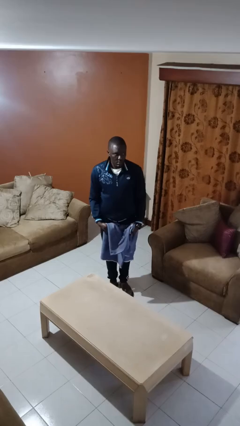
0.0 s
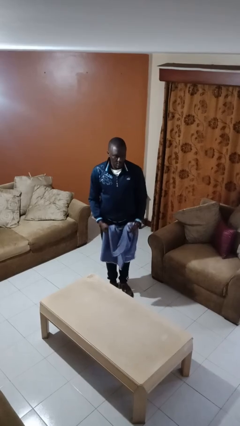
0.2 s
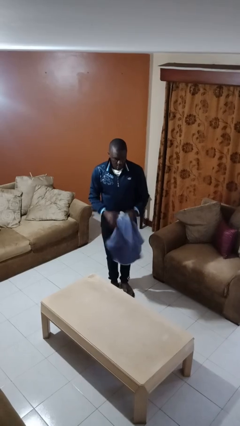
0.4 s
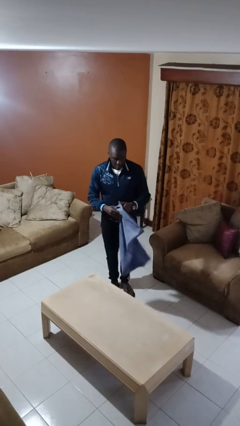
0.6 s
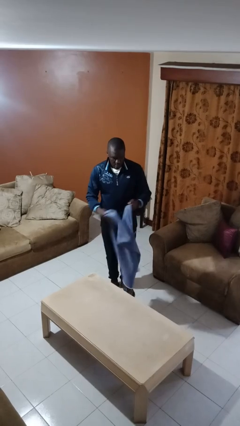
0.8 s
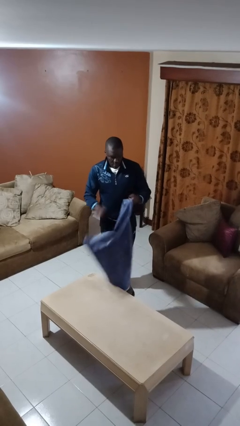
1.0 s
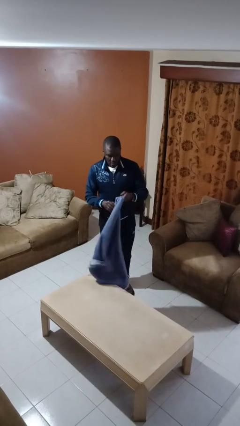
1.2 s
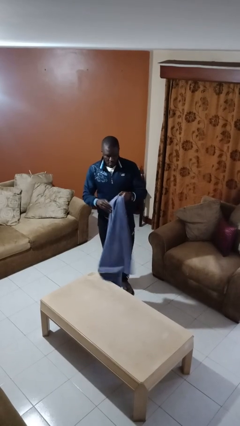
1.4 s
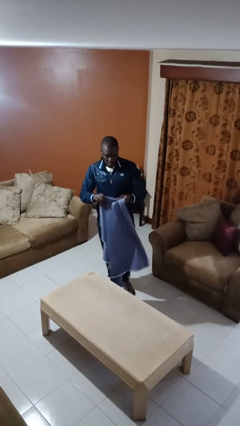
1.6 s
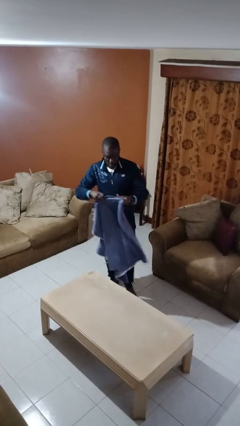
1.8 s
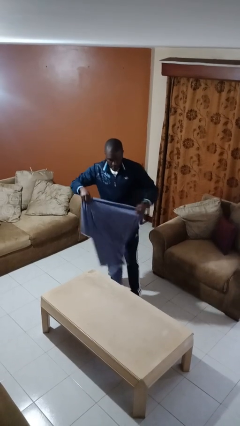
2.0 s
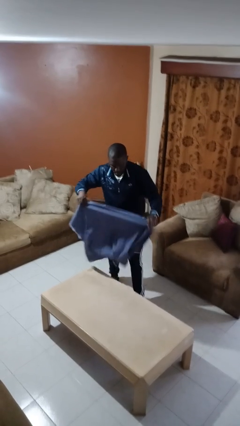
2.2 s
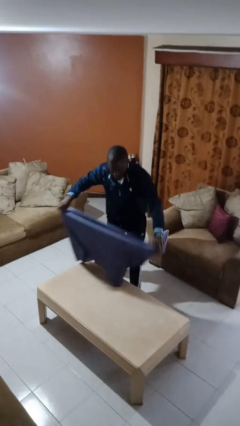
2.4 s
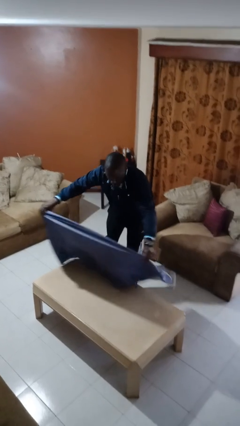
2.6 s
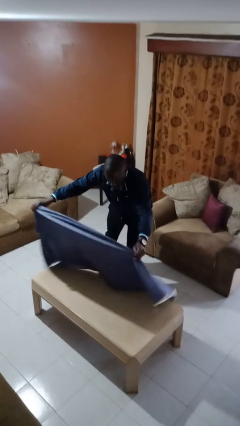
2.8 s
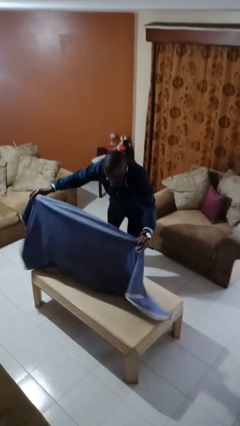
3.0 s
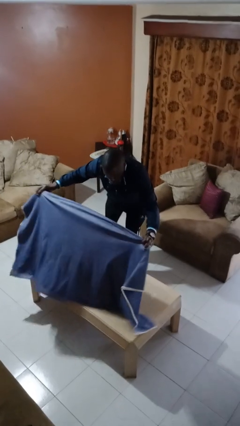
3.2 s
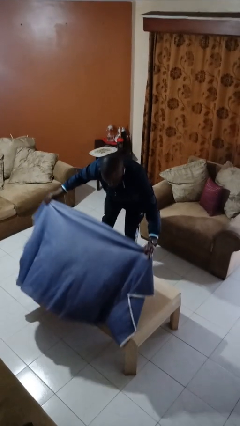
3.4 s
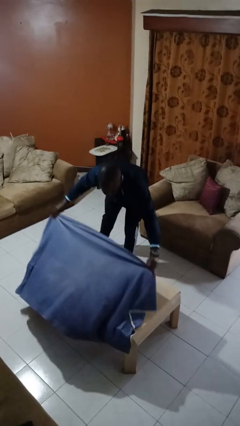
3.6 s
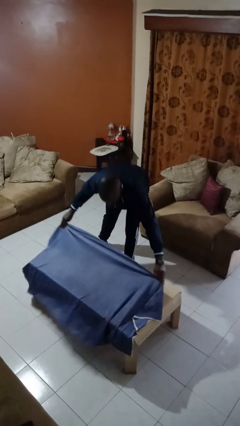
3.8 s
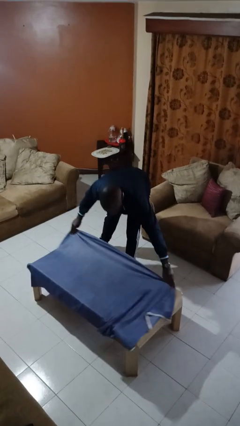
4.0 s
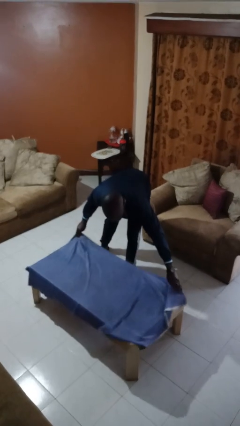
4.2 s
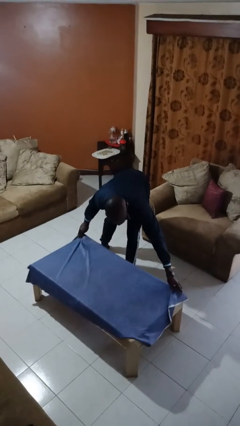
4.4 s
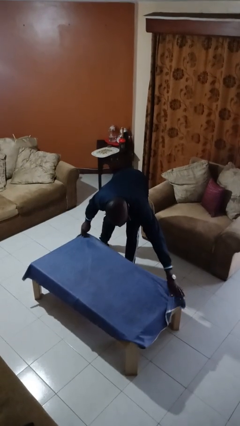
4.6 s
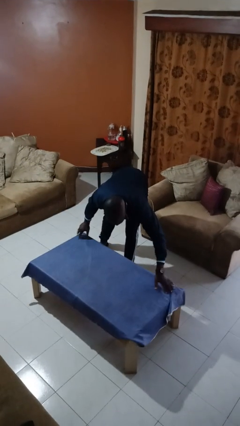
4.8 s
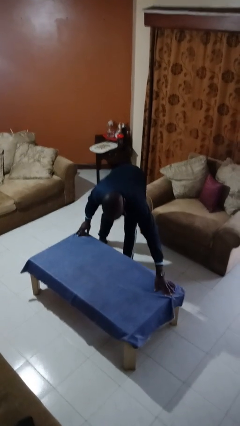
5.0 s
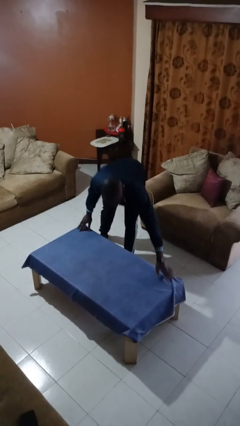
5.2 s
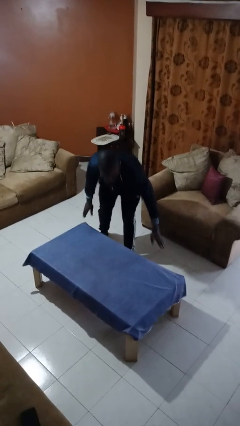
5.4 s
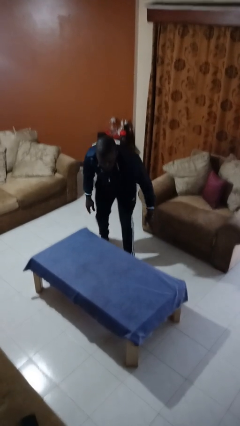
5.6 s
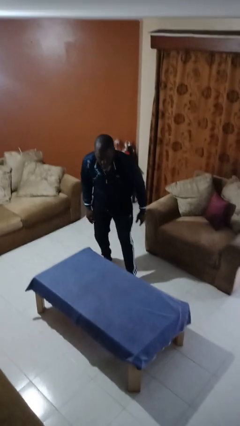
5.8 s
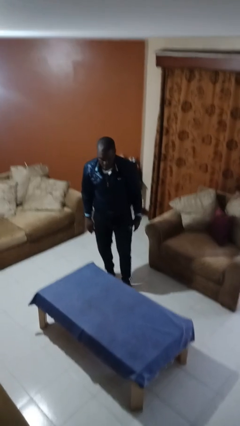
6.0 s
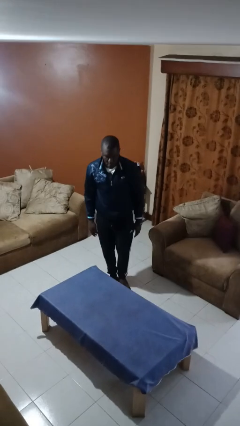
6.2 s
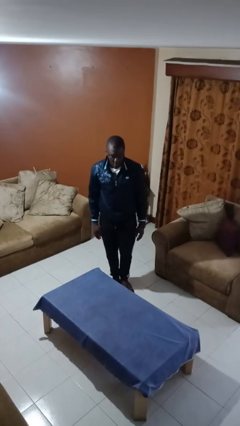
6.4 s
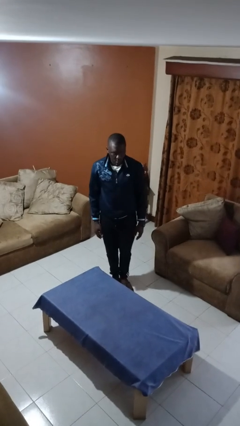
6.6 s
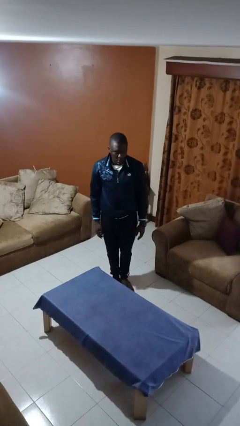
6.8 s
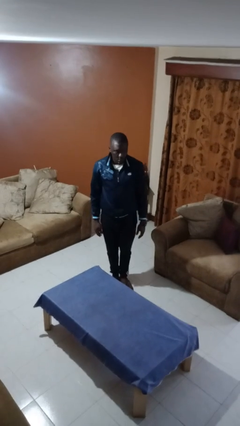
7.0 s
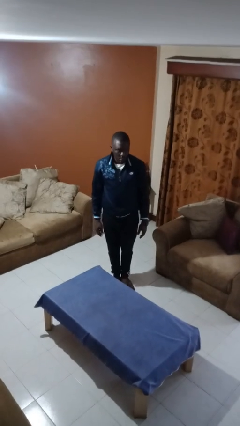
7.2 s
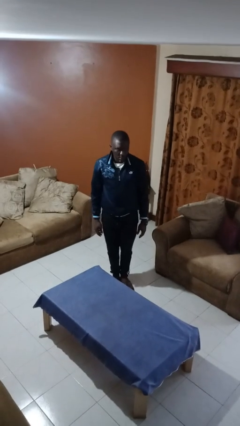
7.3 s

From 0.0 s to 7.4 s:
person spreads tablecloth

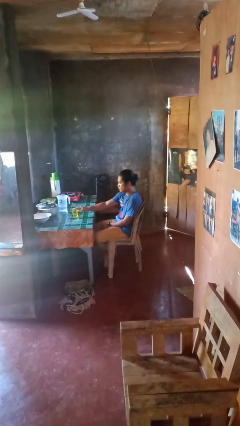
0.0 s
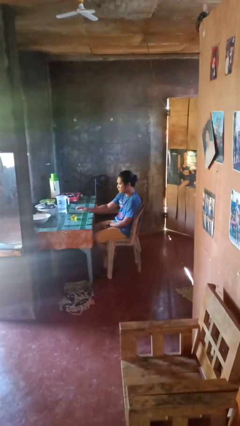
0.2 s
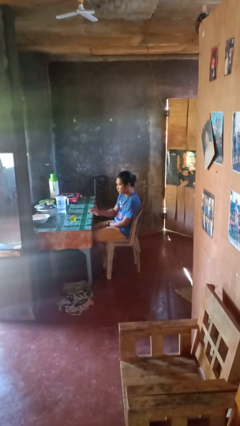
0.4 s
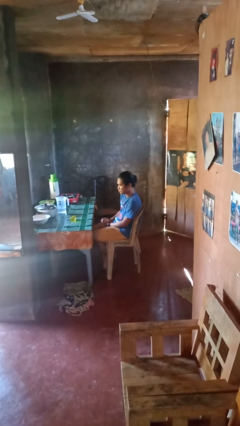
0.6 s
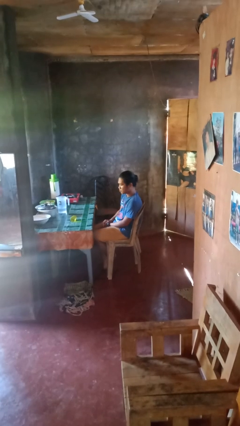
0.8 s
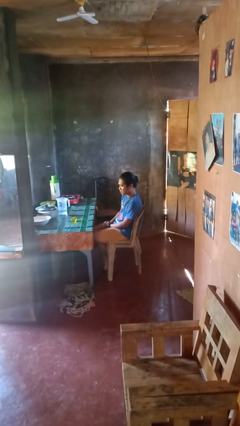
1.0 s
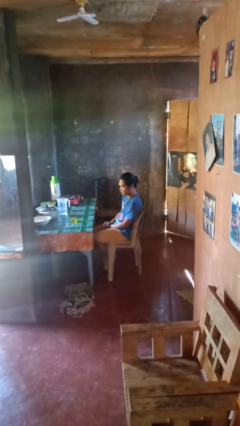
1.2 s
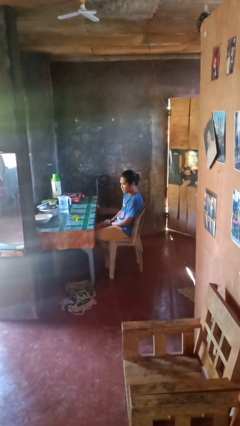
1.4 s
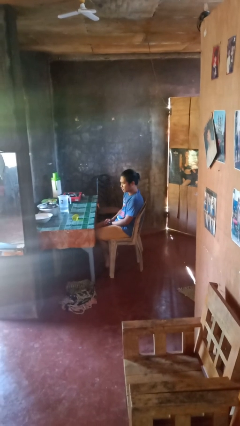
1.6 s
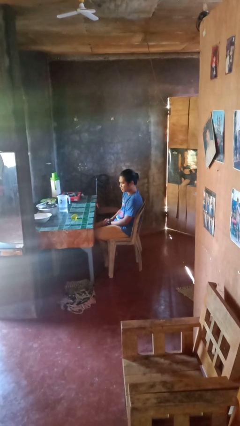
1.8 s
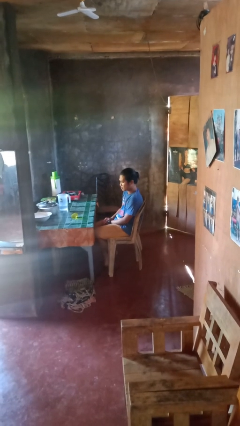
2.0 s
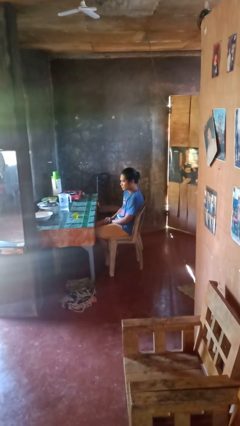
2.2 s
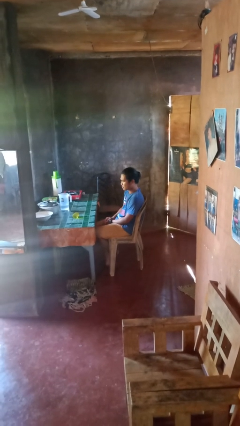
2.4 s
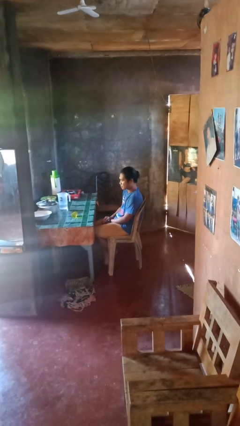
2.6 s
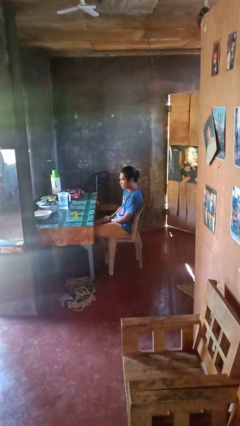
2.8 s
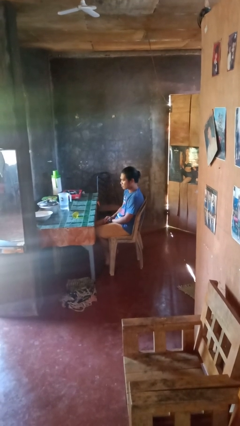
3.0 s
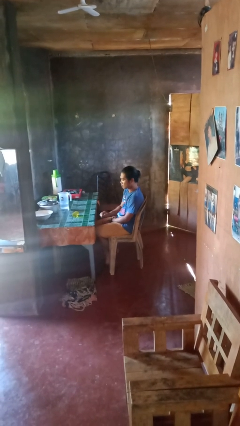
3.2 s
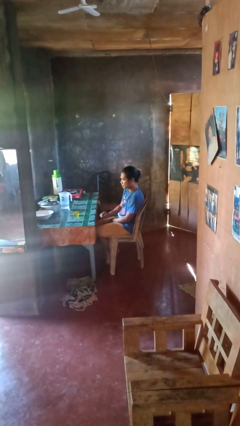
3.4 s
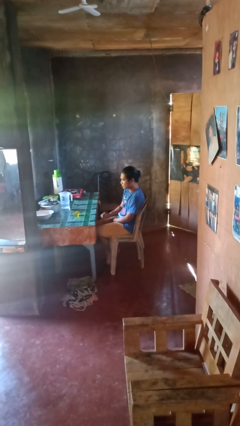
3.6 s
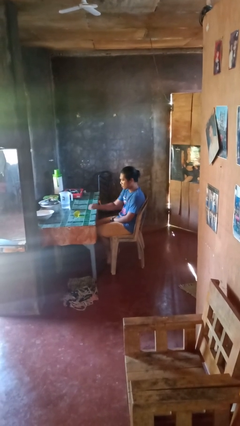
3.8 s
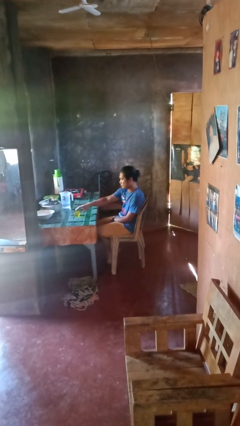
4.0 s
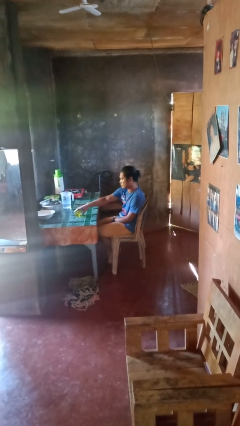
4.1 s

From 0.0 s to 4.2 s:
person spills on table

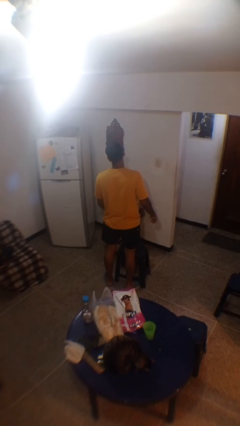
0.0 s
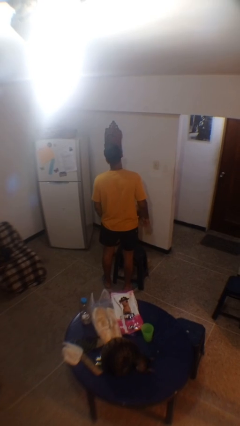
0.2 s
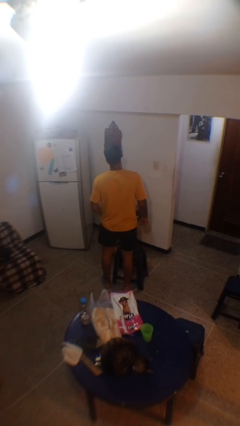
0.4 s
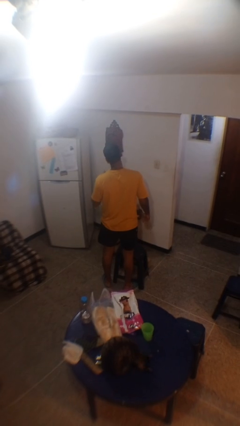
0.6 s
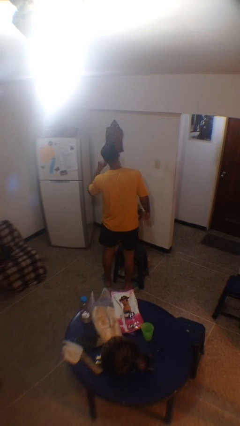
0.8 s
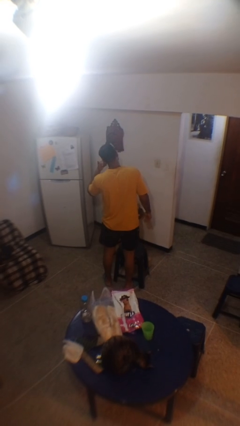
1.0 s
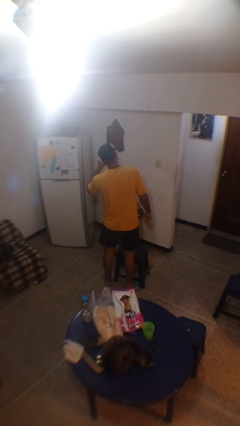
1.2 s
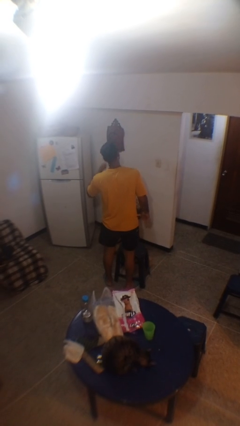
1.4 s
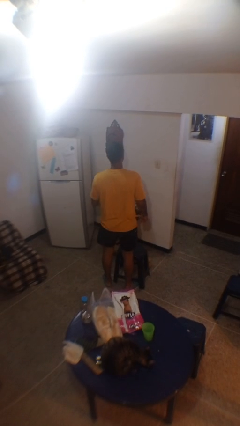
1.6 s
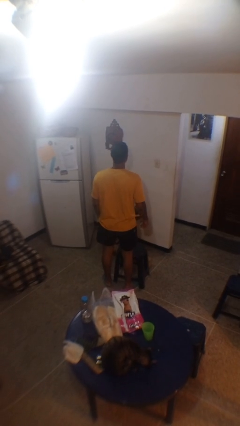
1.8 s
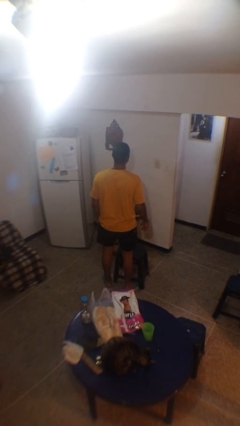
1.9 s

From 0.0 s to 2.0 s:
person gestures call me

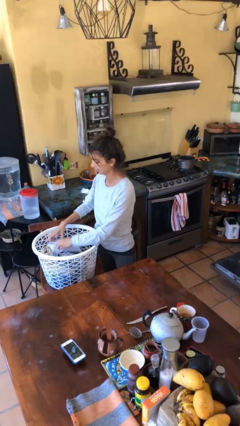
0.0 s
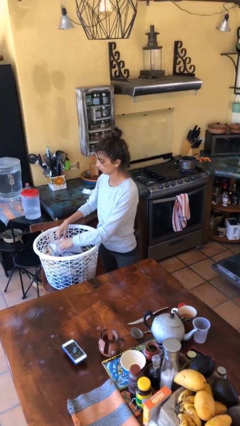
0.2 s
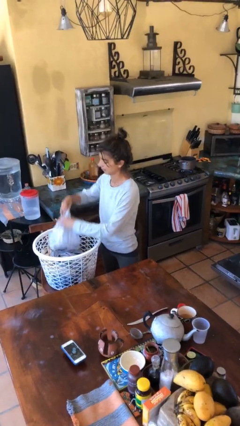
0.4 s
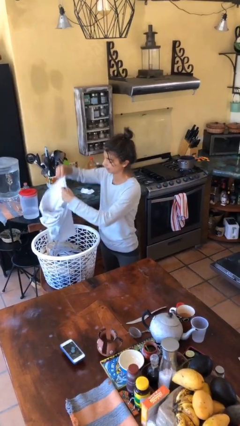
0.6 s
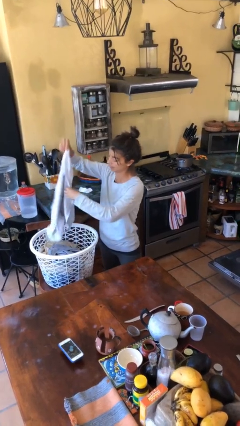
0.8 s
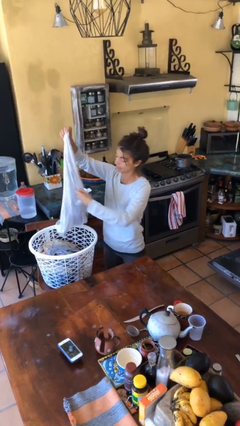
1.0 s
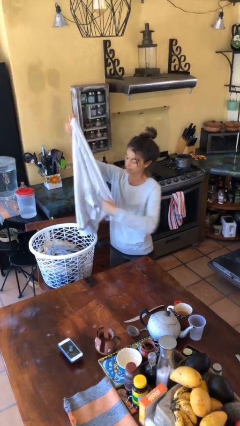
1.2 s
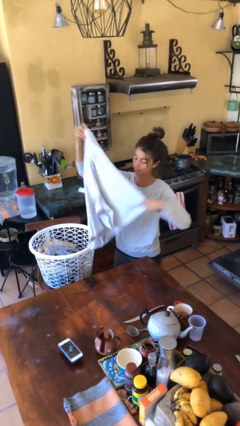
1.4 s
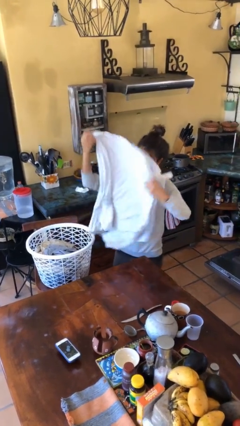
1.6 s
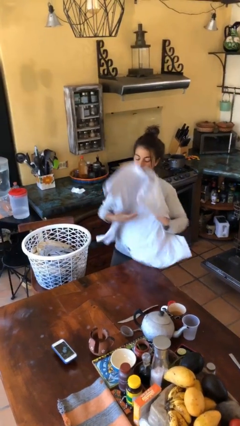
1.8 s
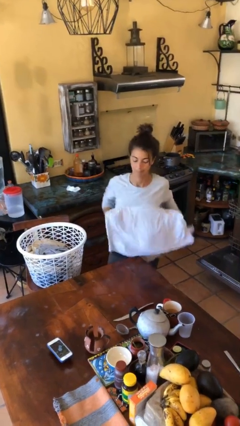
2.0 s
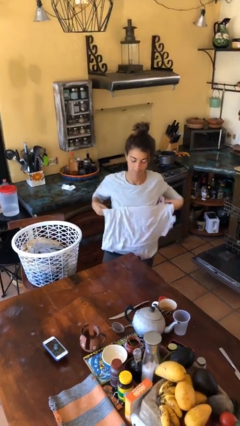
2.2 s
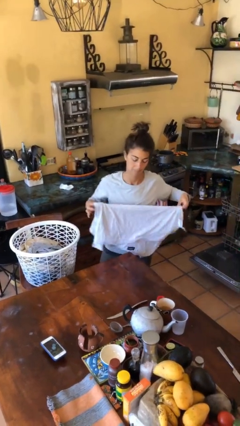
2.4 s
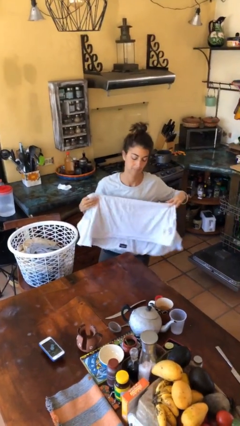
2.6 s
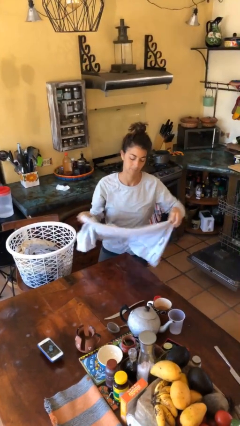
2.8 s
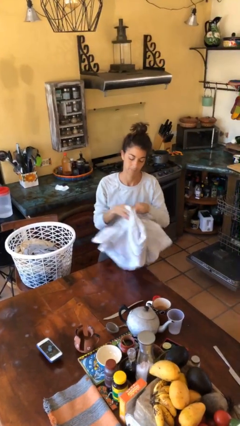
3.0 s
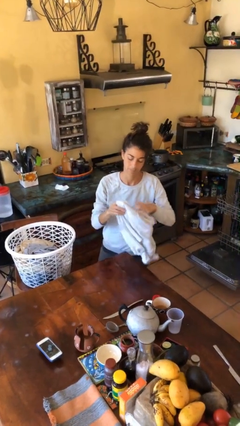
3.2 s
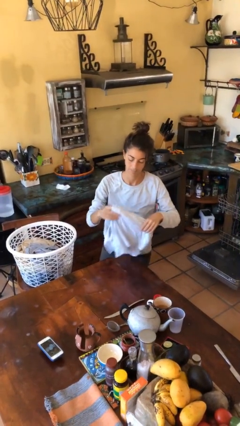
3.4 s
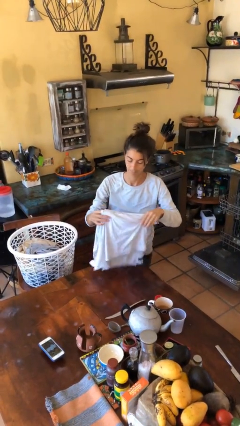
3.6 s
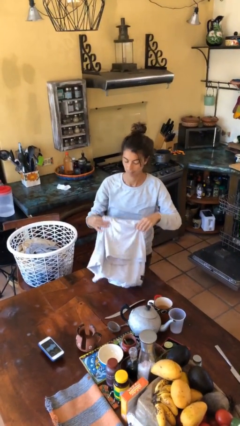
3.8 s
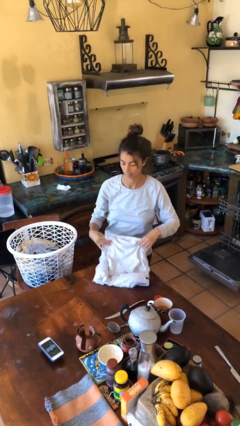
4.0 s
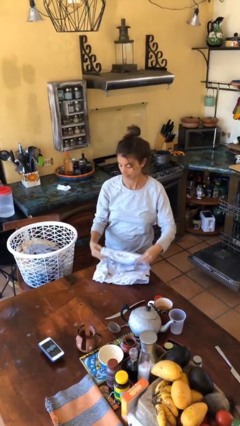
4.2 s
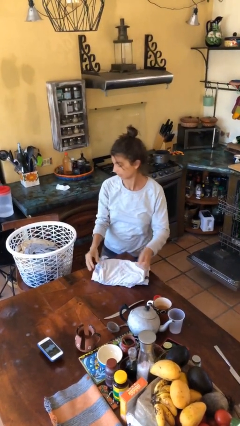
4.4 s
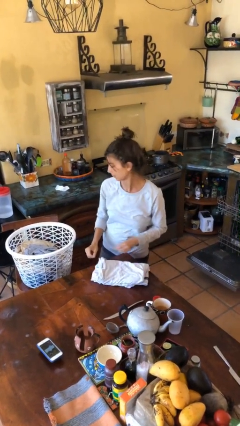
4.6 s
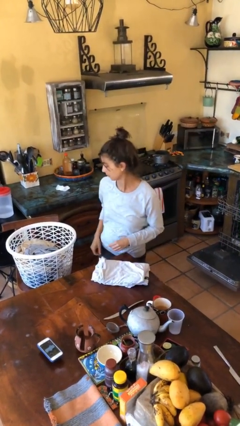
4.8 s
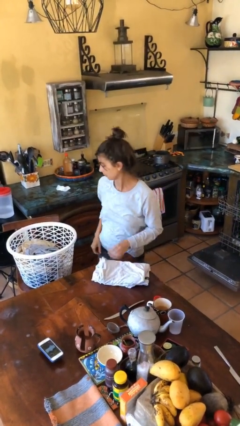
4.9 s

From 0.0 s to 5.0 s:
person folds shirt
